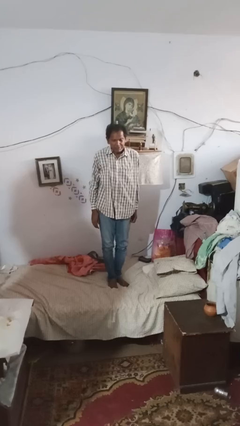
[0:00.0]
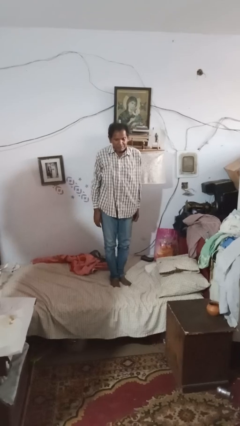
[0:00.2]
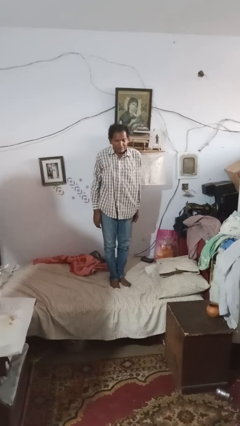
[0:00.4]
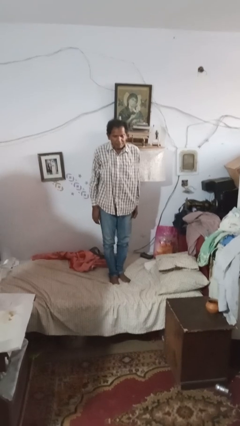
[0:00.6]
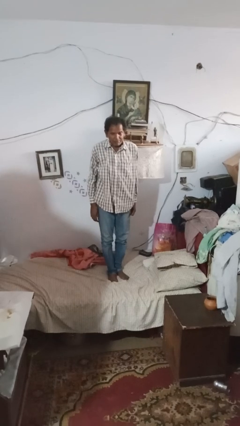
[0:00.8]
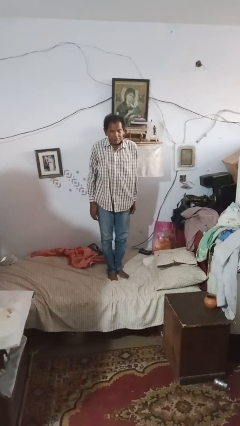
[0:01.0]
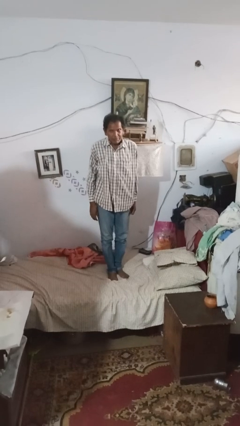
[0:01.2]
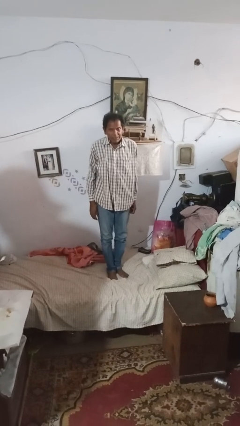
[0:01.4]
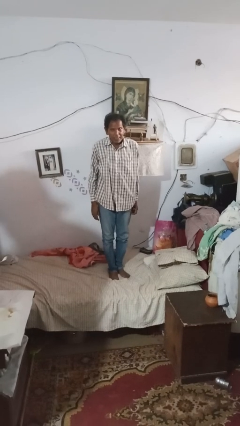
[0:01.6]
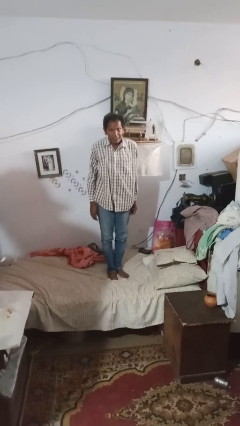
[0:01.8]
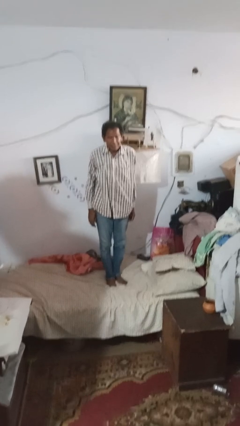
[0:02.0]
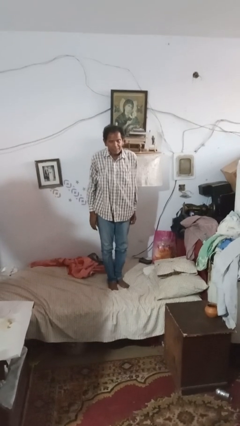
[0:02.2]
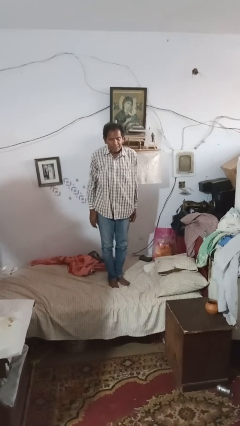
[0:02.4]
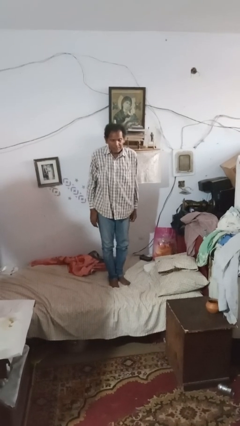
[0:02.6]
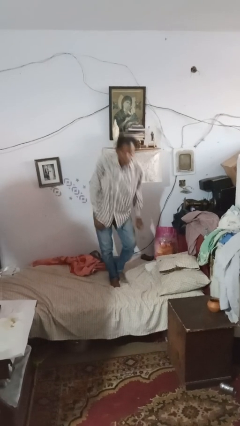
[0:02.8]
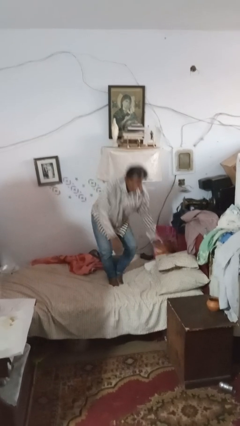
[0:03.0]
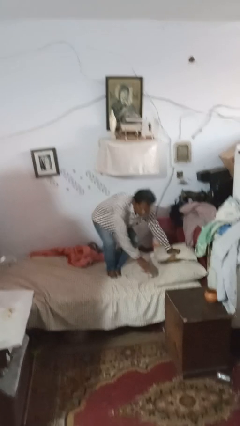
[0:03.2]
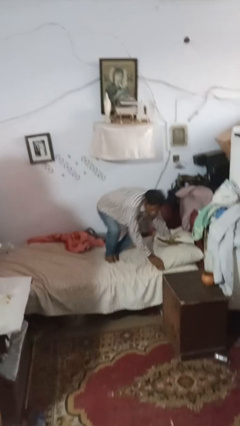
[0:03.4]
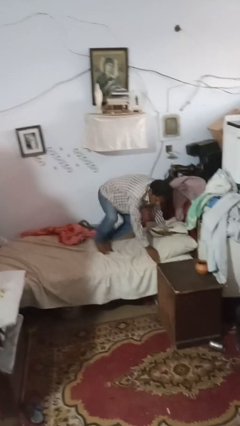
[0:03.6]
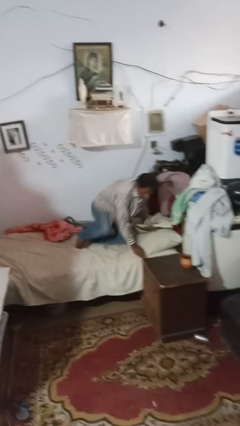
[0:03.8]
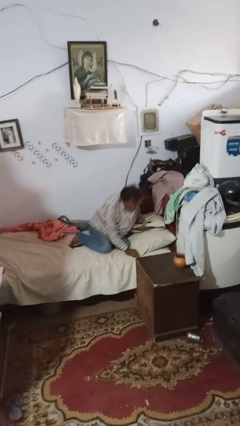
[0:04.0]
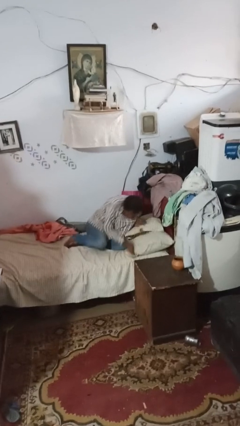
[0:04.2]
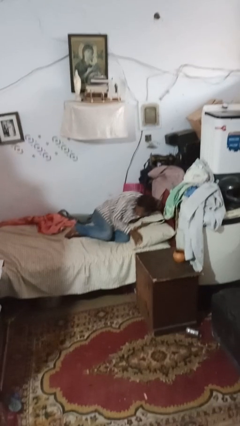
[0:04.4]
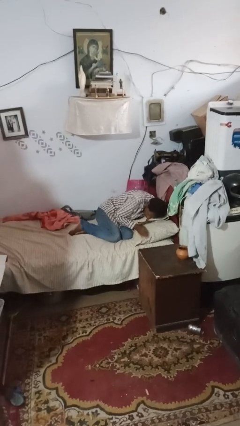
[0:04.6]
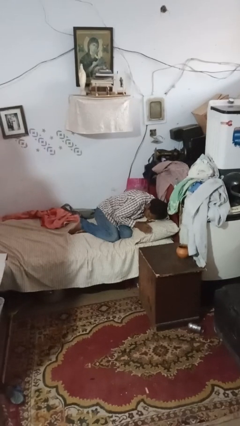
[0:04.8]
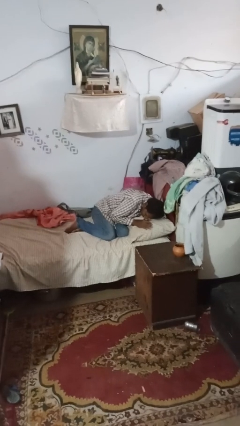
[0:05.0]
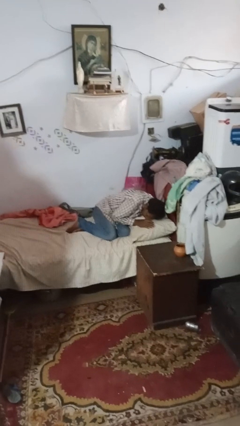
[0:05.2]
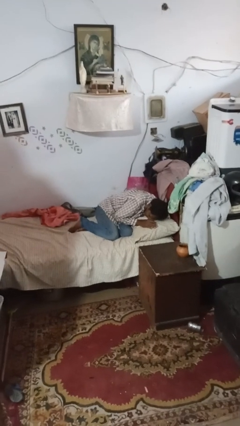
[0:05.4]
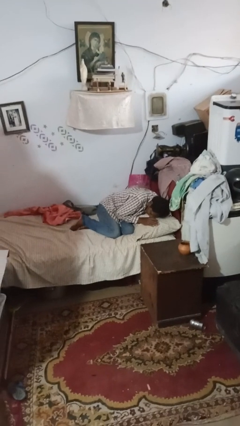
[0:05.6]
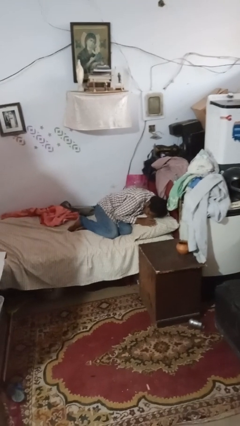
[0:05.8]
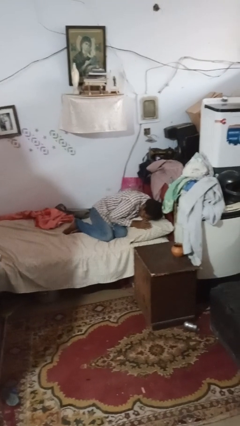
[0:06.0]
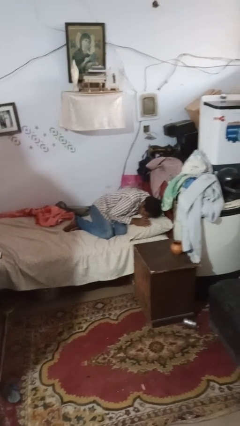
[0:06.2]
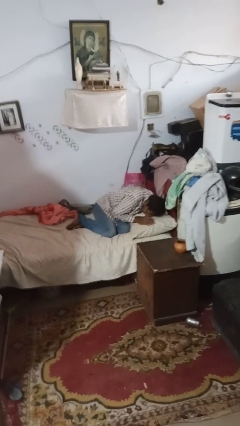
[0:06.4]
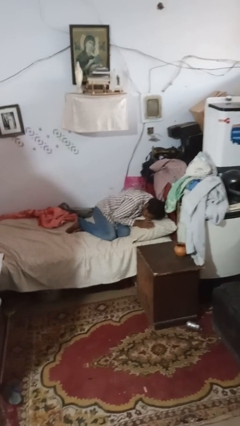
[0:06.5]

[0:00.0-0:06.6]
person lies down on bed

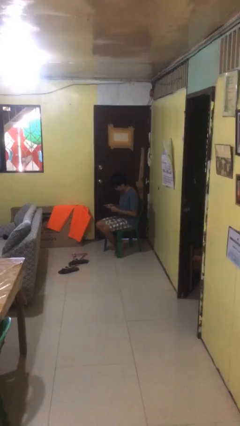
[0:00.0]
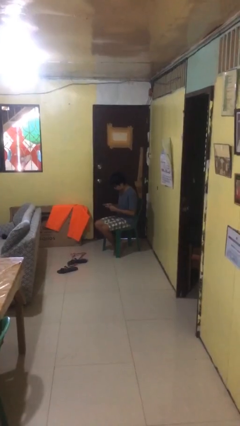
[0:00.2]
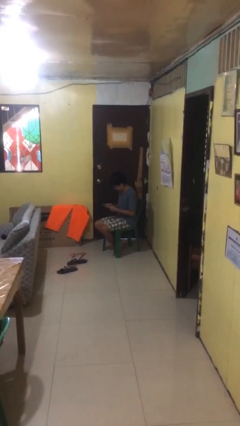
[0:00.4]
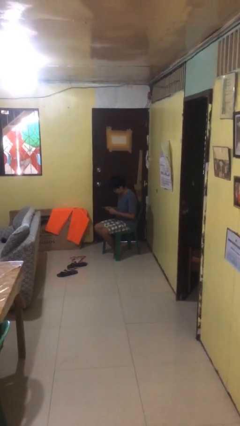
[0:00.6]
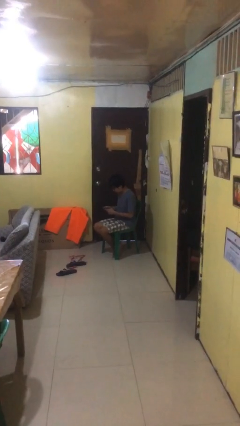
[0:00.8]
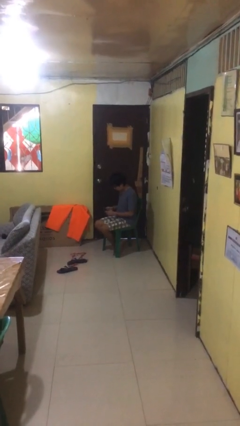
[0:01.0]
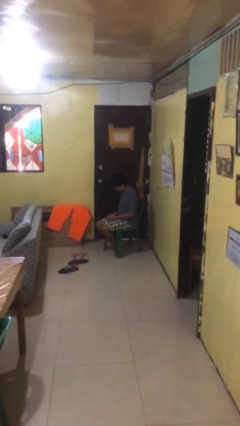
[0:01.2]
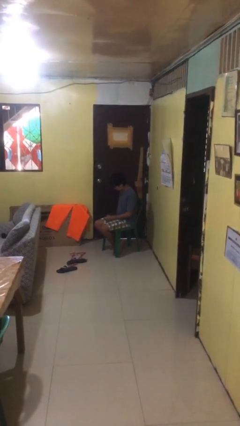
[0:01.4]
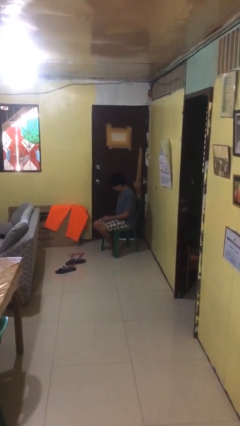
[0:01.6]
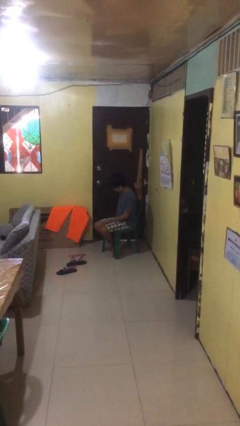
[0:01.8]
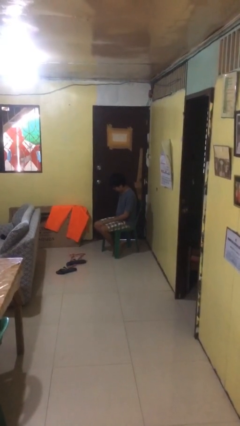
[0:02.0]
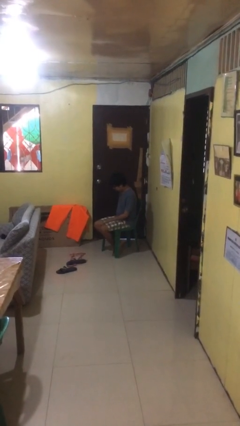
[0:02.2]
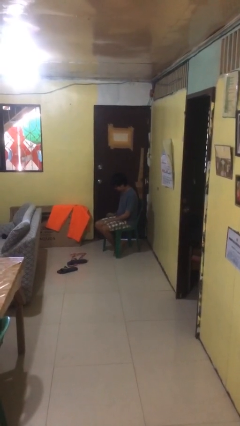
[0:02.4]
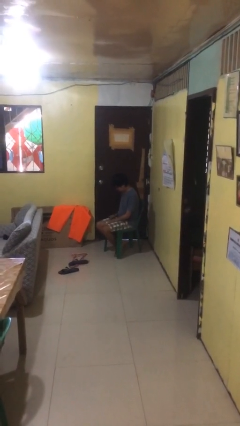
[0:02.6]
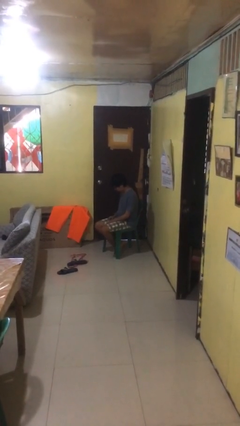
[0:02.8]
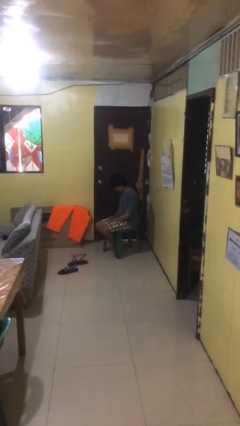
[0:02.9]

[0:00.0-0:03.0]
person puts phone into pocket

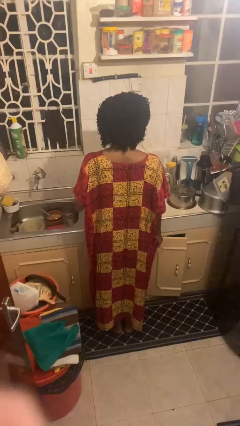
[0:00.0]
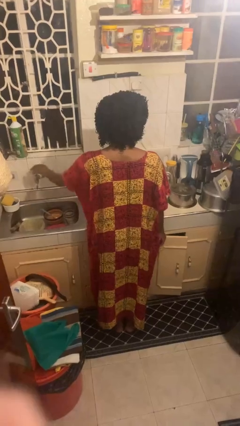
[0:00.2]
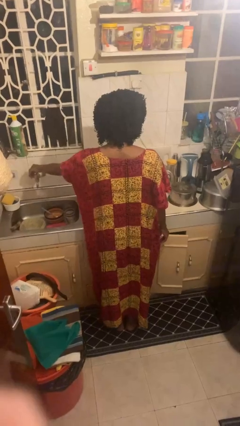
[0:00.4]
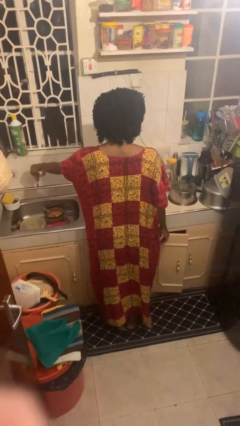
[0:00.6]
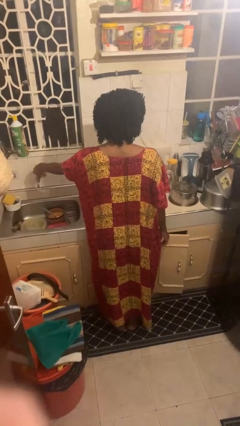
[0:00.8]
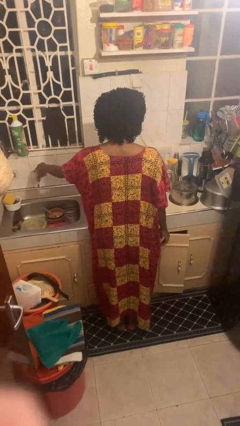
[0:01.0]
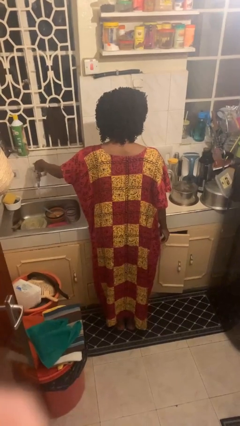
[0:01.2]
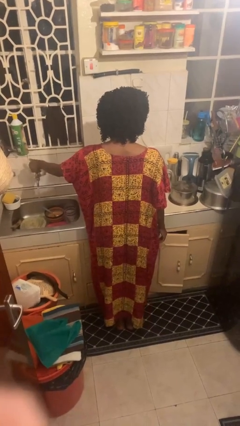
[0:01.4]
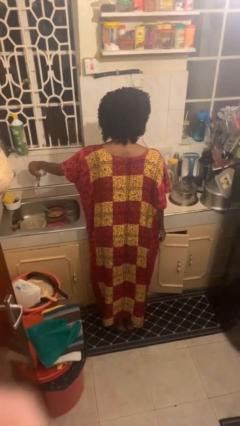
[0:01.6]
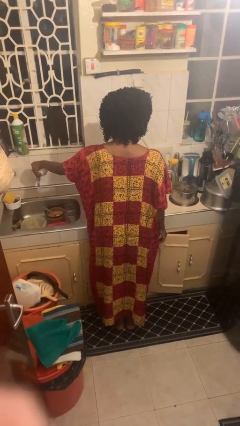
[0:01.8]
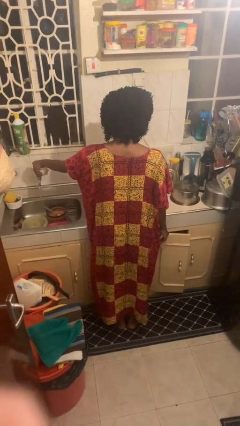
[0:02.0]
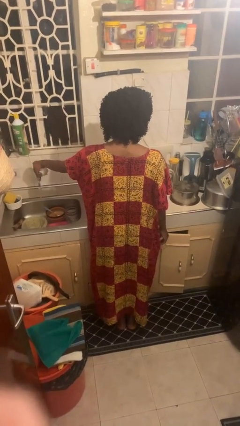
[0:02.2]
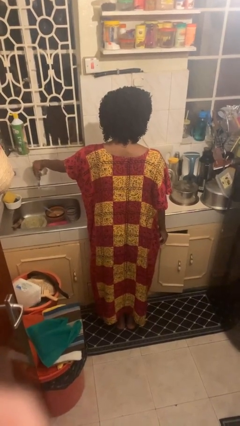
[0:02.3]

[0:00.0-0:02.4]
person turns on faucet

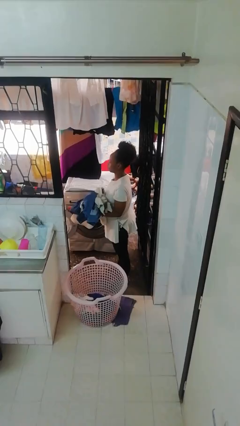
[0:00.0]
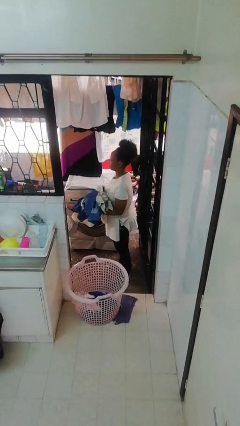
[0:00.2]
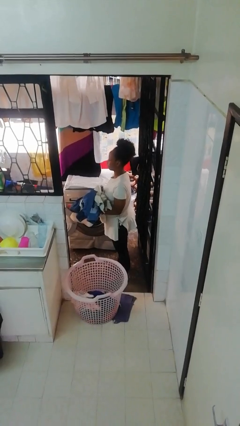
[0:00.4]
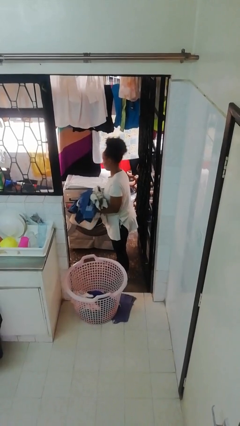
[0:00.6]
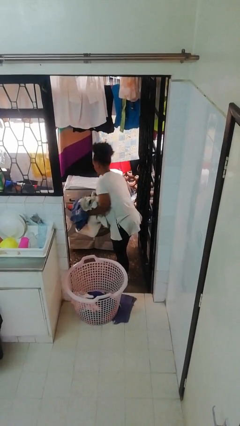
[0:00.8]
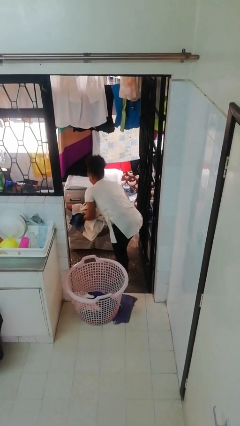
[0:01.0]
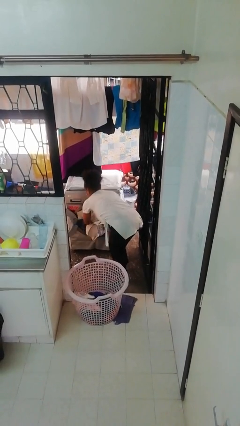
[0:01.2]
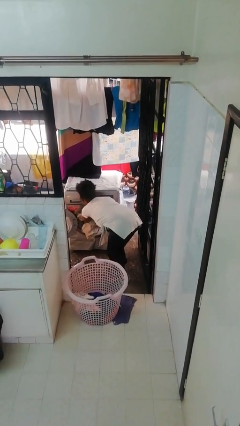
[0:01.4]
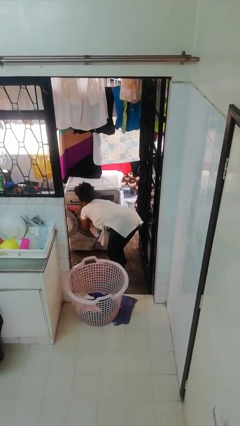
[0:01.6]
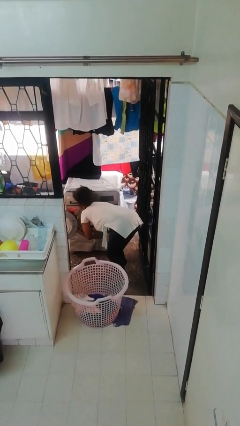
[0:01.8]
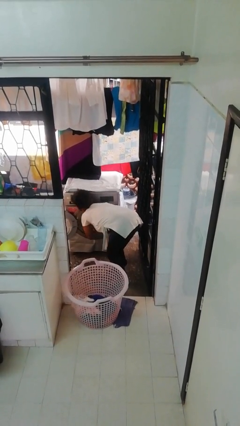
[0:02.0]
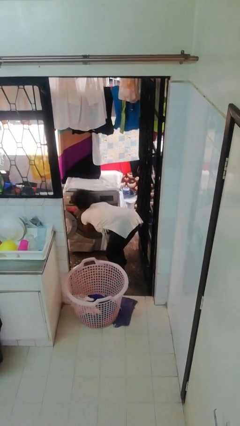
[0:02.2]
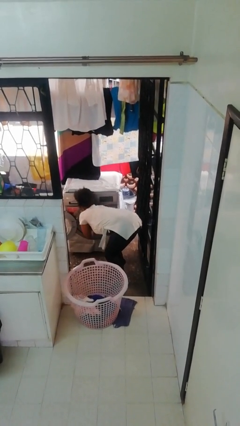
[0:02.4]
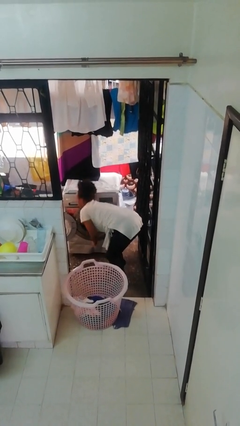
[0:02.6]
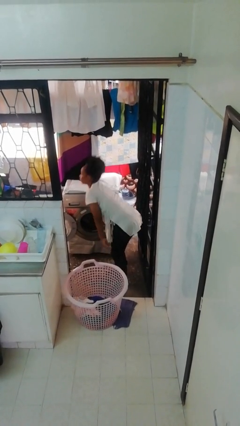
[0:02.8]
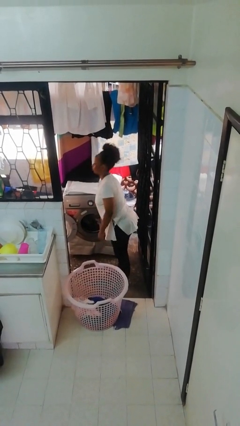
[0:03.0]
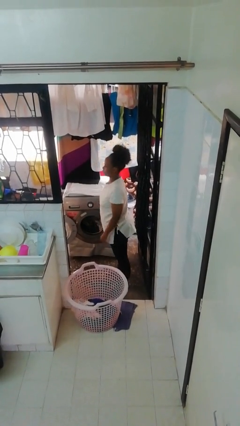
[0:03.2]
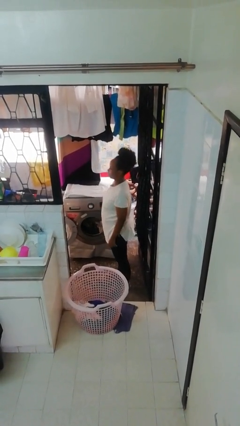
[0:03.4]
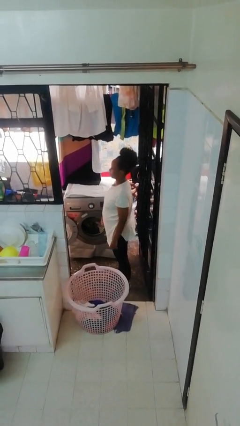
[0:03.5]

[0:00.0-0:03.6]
person loads clotheswasher

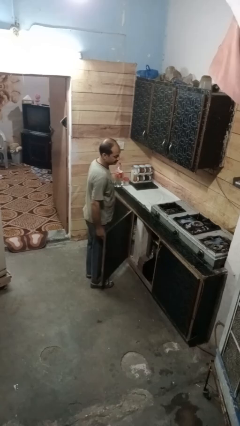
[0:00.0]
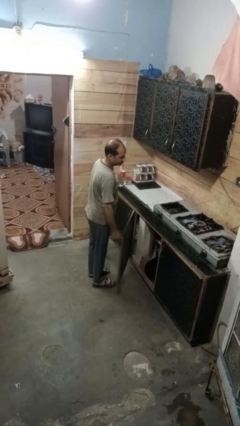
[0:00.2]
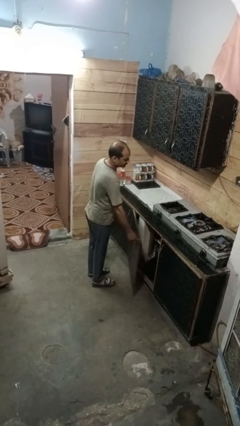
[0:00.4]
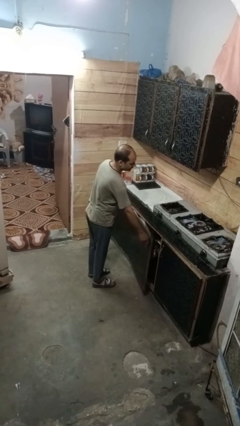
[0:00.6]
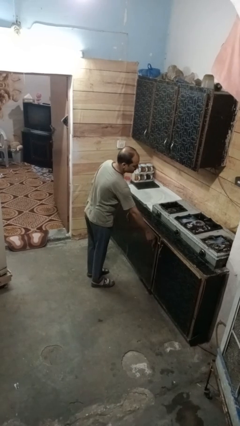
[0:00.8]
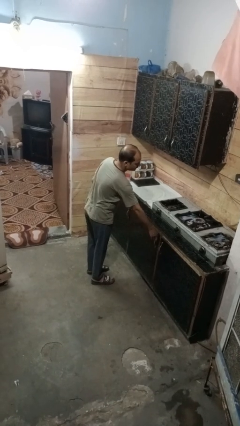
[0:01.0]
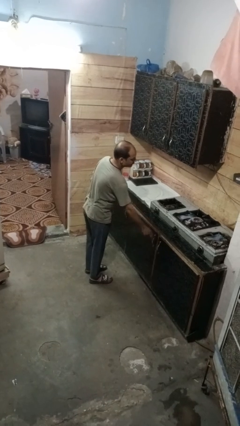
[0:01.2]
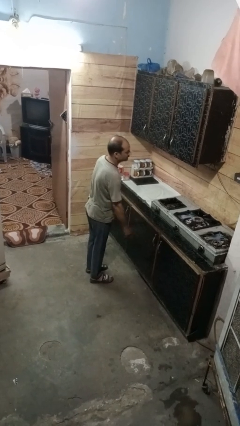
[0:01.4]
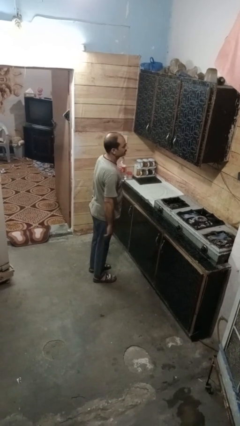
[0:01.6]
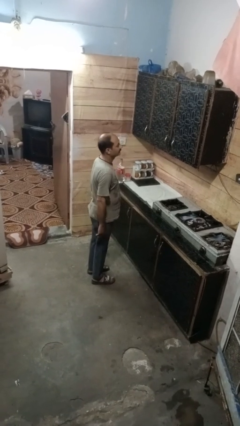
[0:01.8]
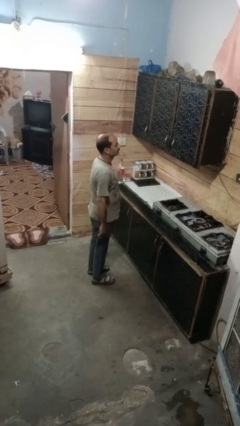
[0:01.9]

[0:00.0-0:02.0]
person closes cabinet
